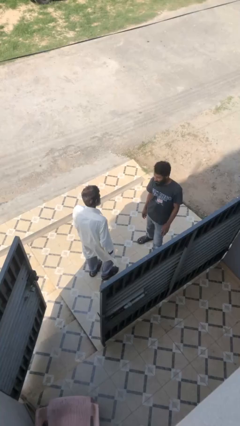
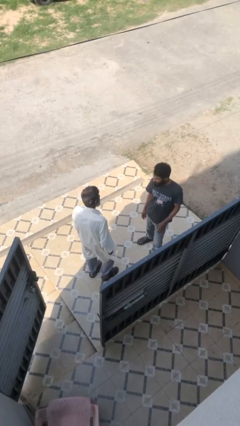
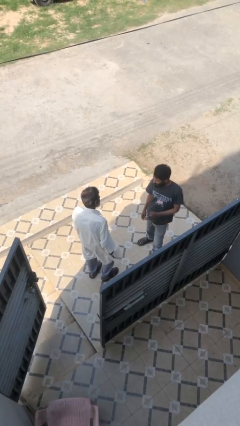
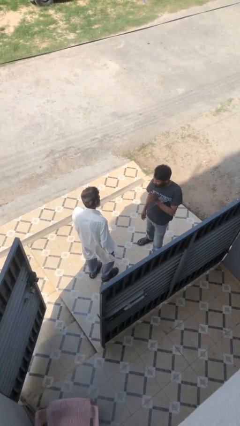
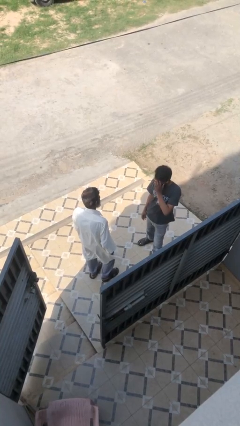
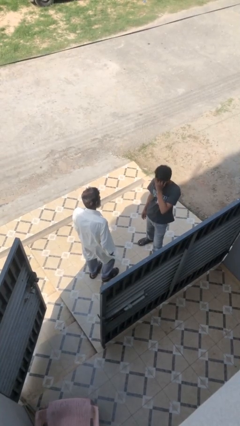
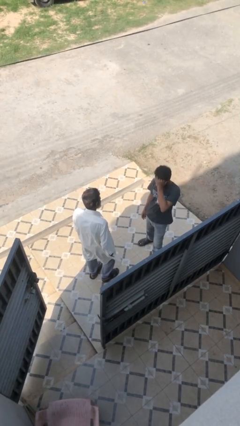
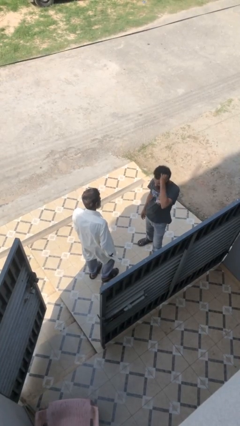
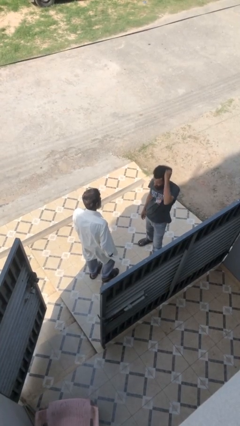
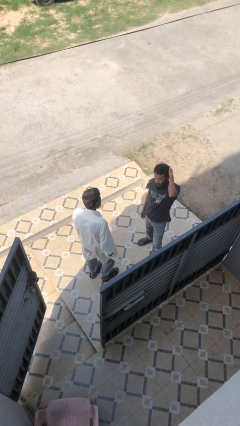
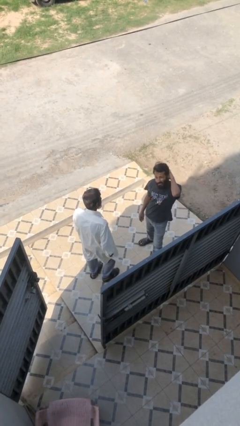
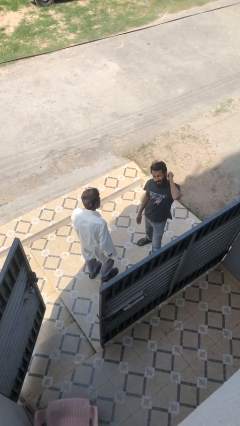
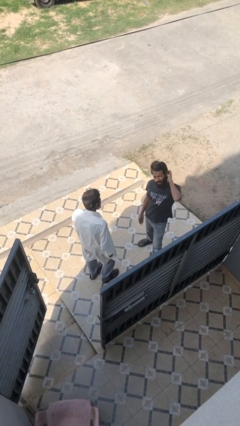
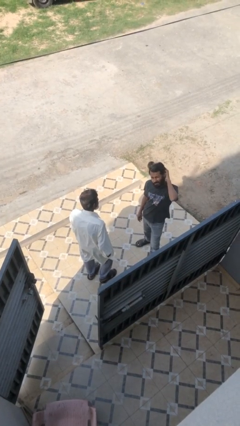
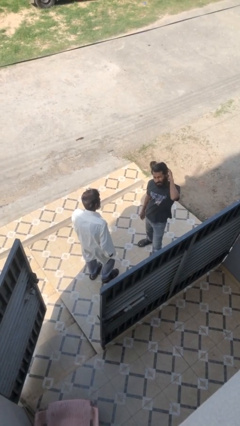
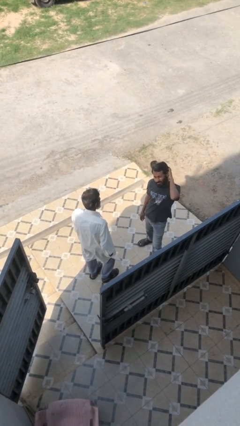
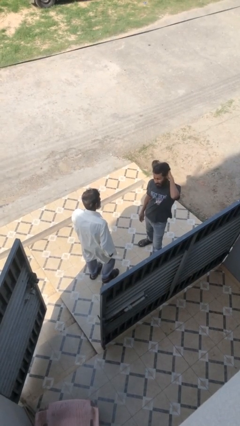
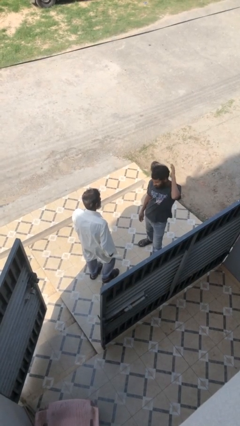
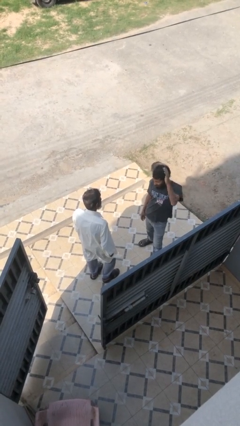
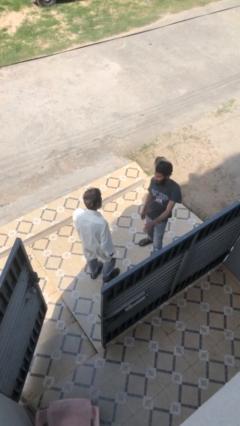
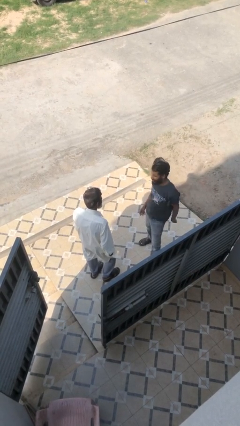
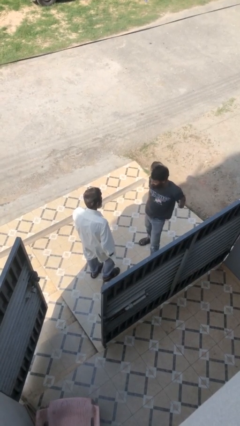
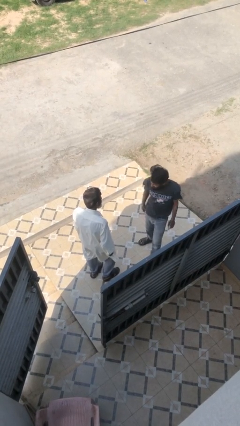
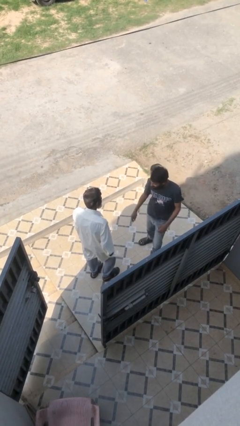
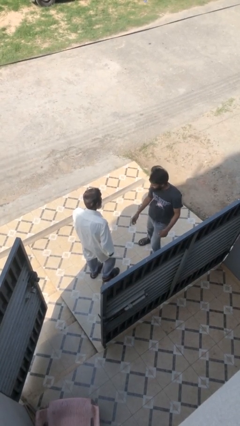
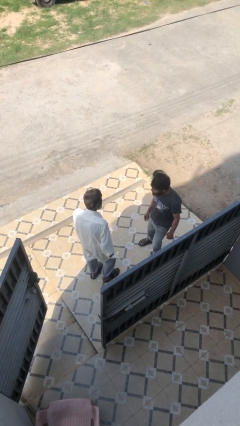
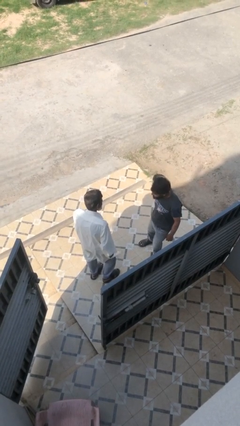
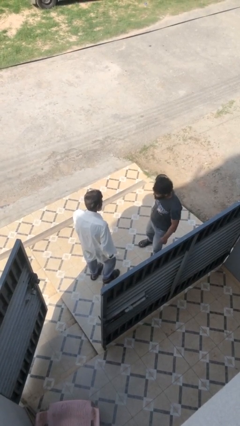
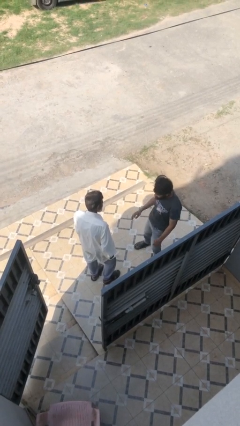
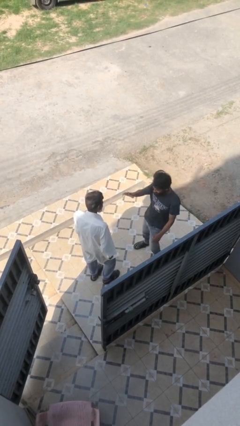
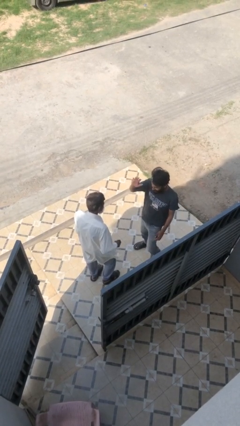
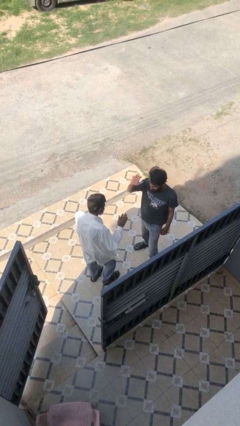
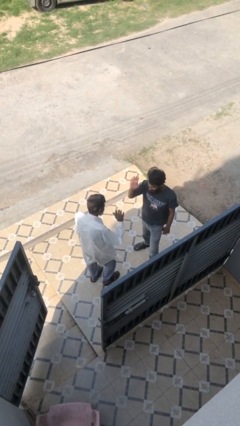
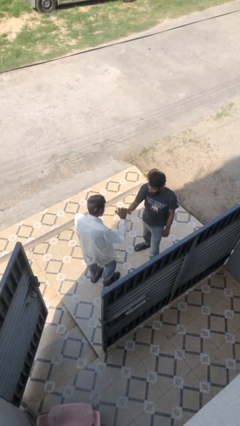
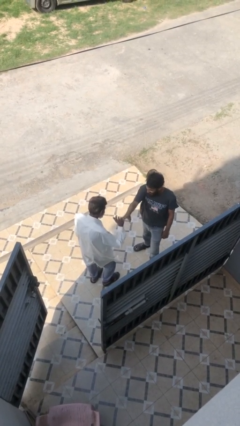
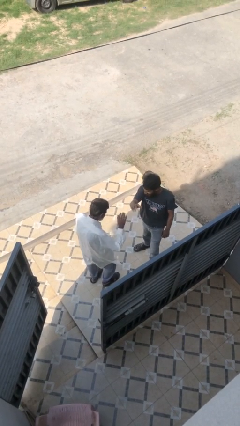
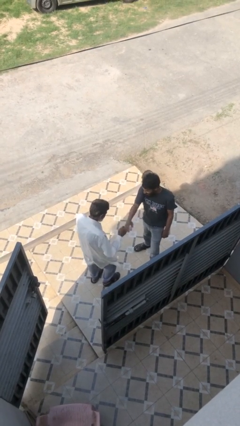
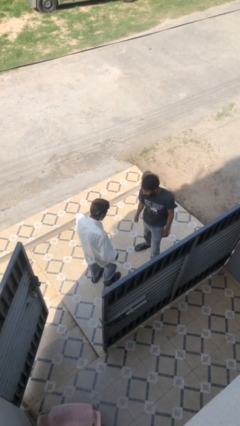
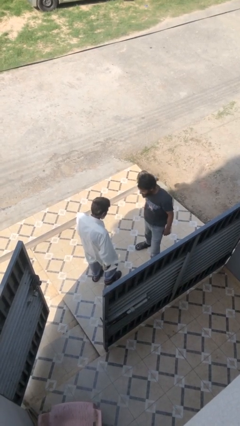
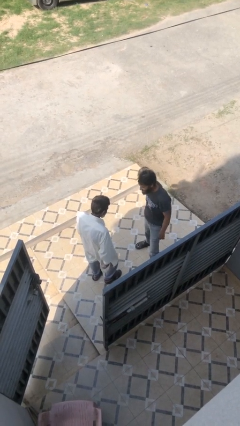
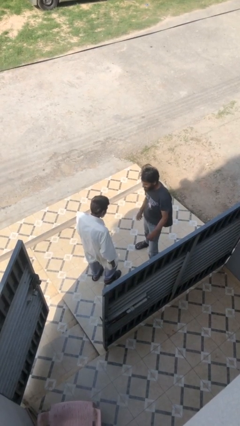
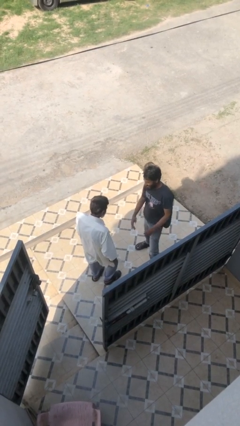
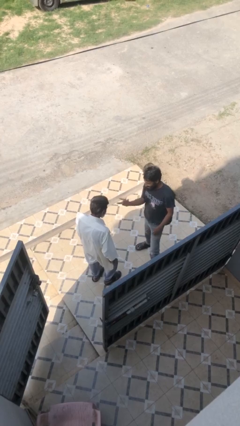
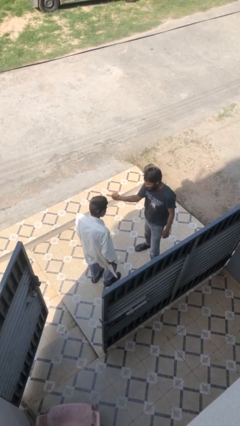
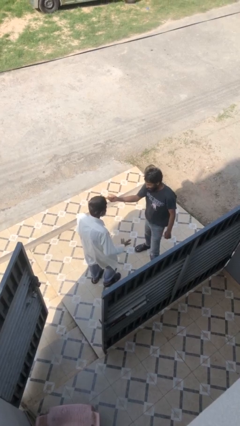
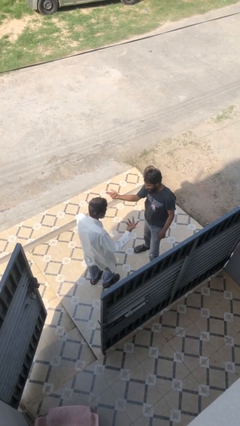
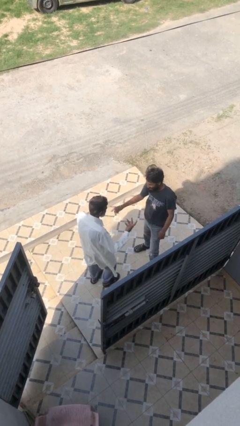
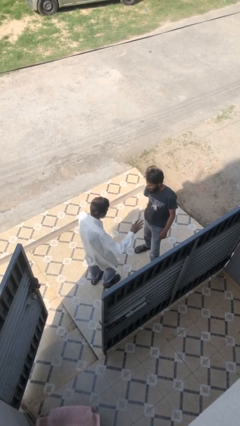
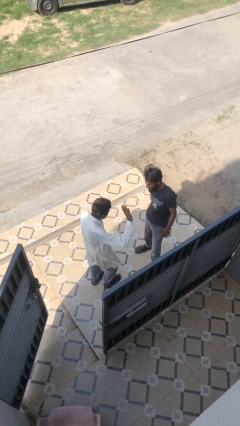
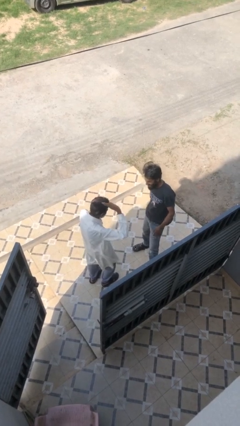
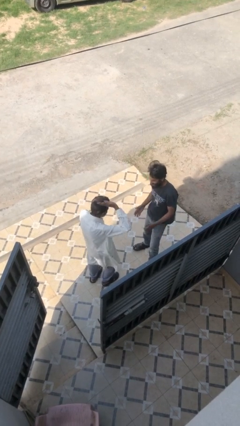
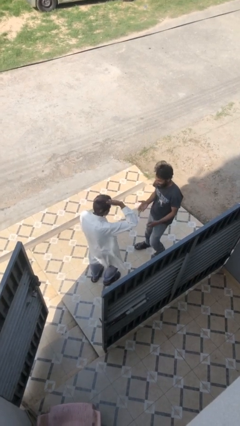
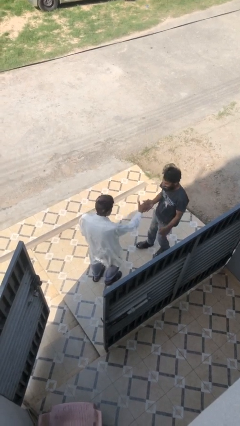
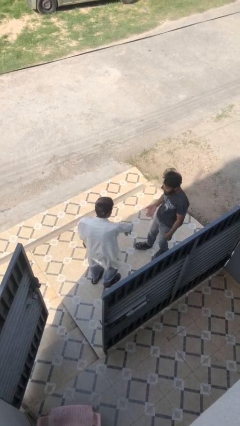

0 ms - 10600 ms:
person highfives hand

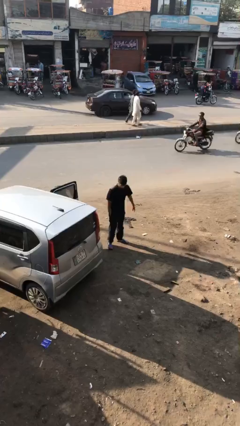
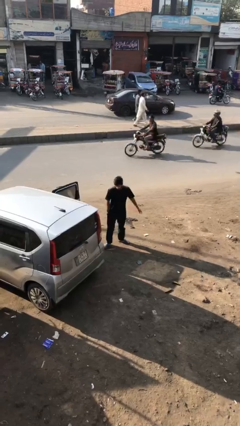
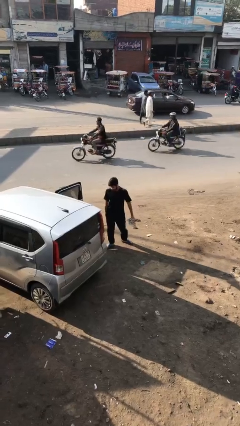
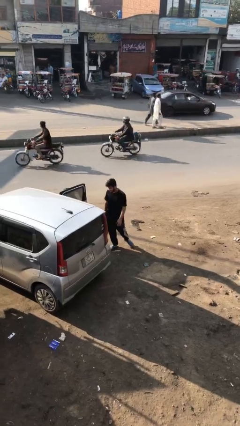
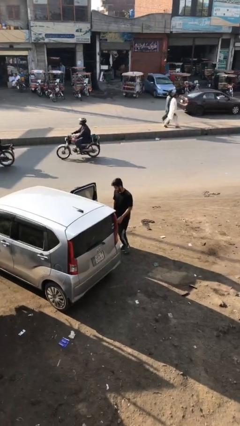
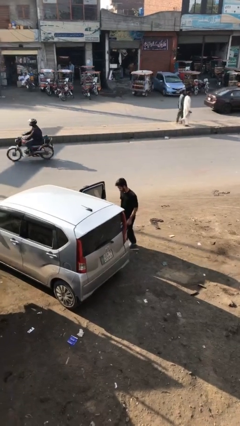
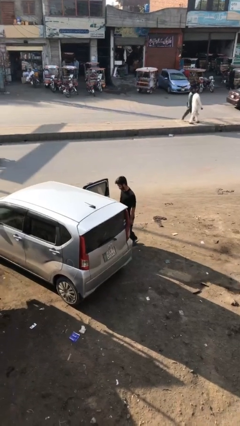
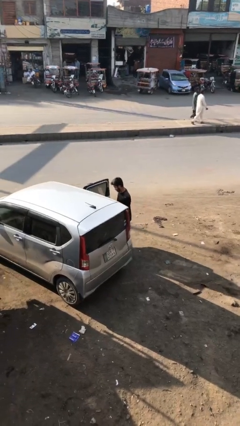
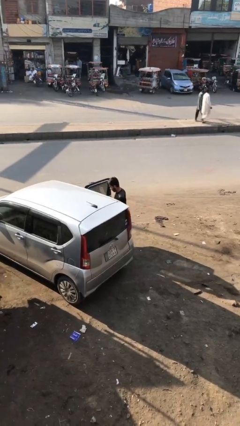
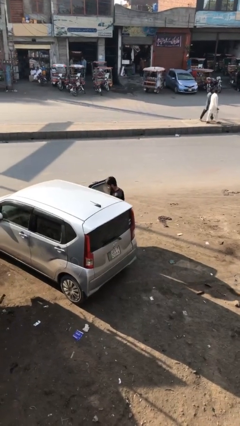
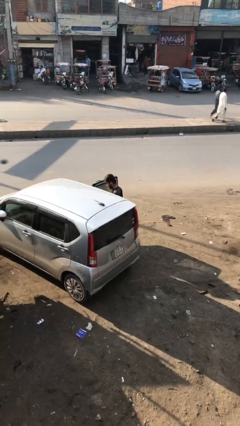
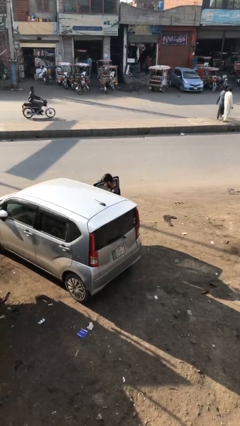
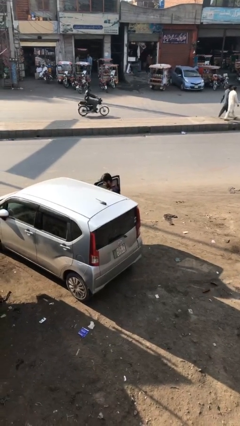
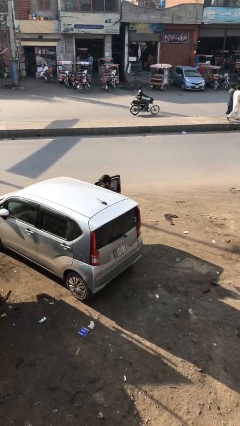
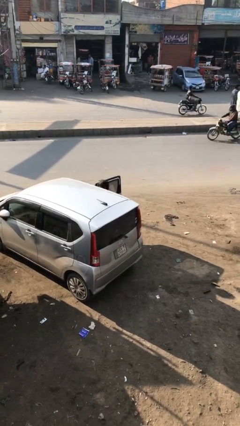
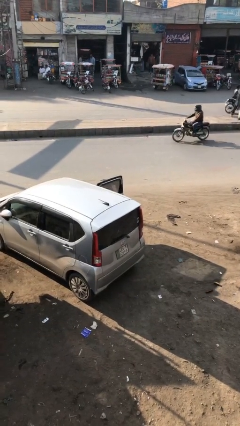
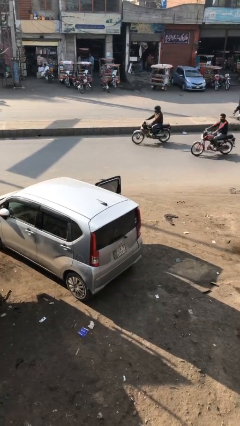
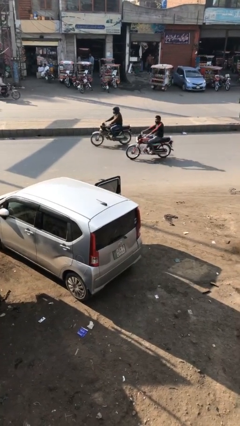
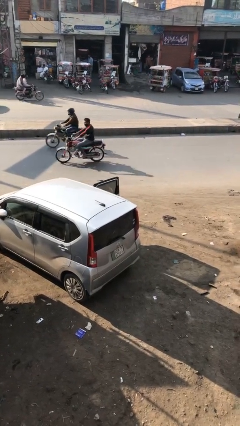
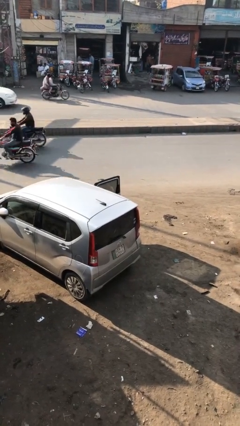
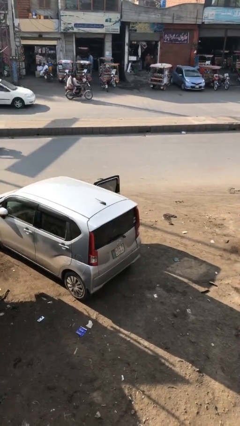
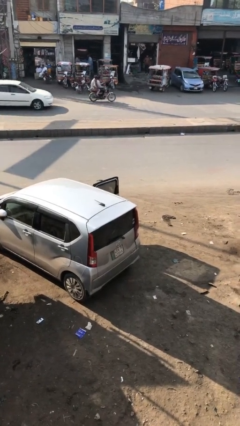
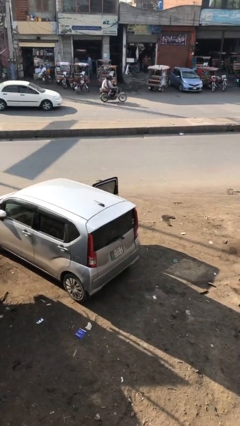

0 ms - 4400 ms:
person enters car

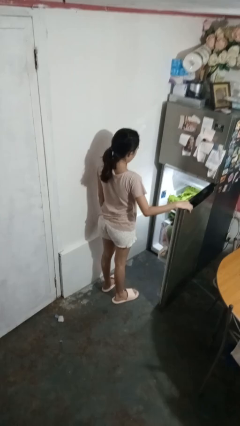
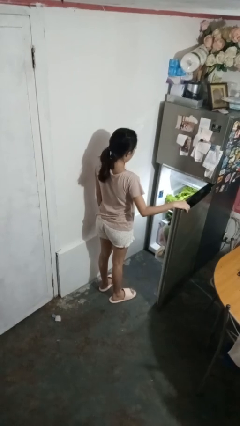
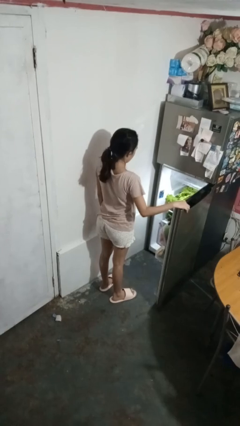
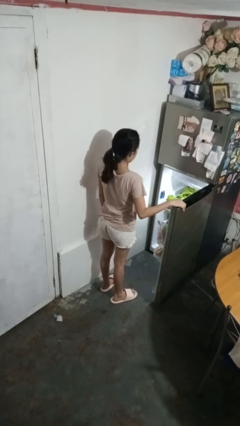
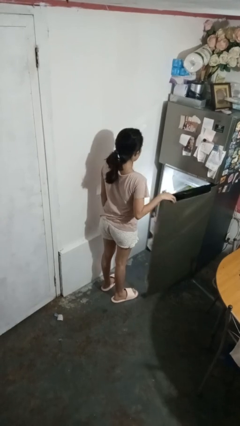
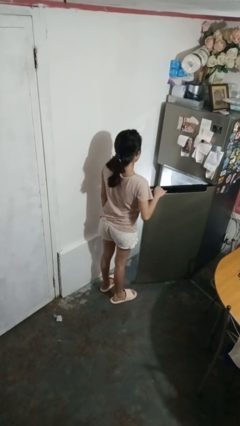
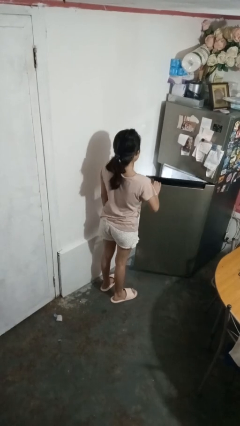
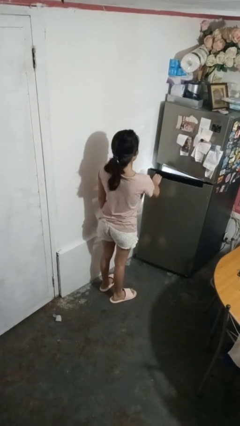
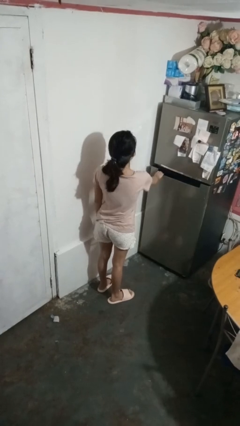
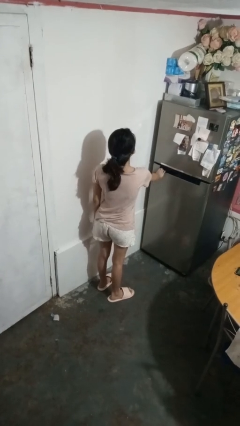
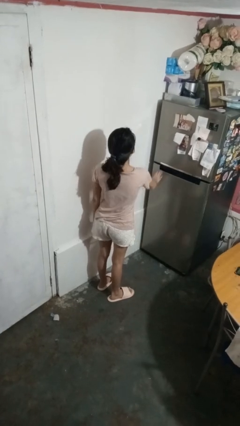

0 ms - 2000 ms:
person closes refrigerator

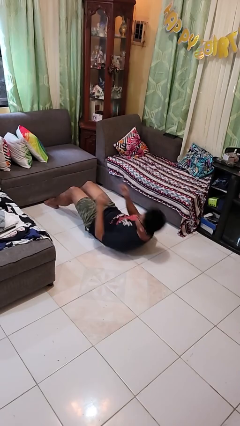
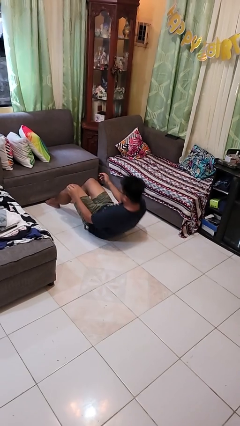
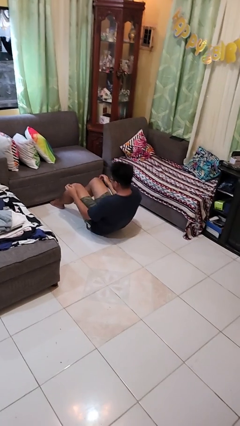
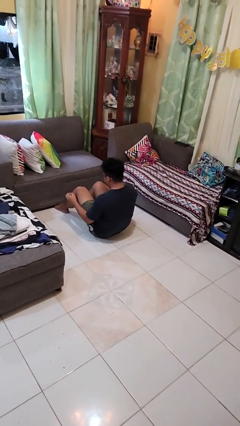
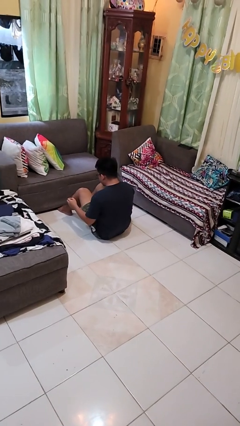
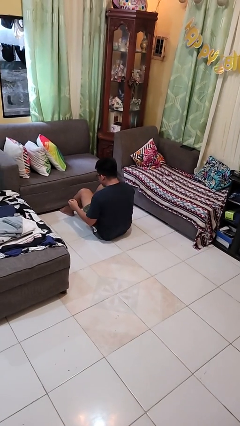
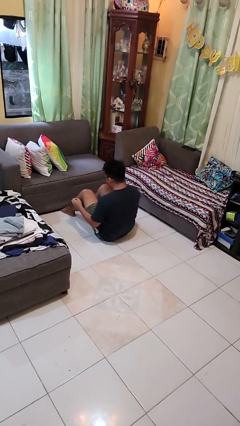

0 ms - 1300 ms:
person exercises with situp
